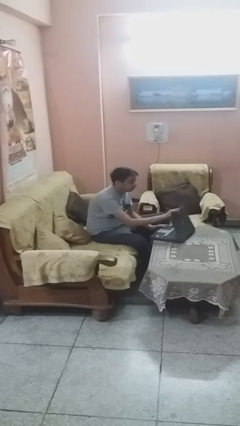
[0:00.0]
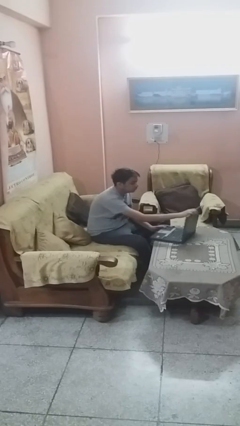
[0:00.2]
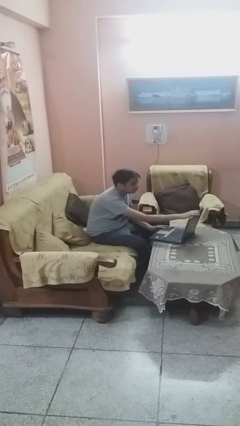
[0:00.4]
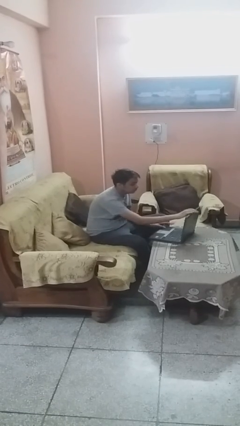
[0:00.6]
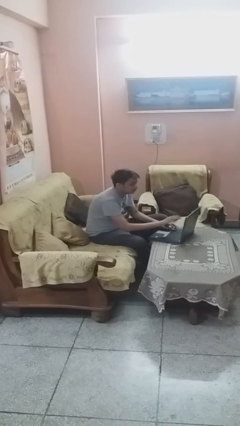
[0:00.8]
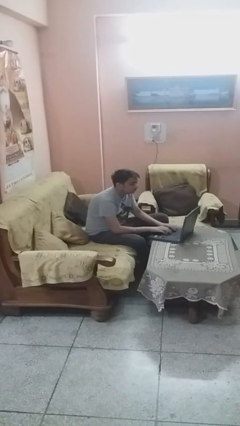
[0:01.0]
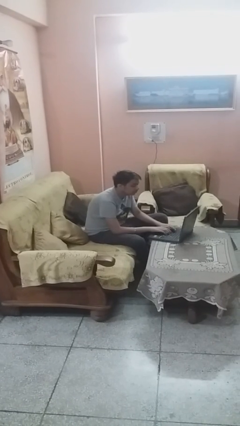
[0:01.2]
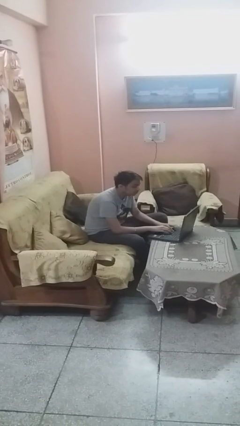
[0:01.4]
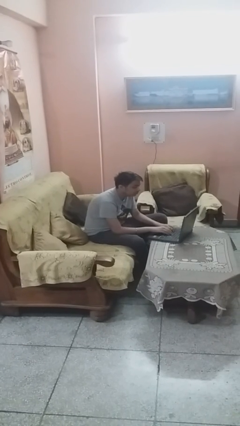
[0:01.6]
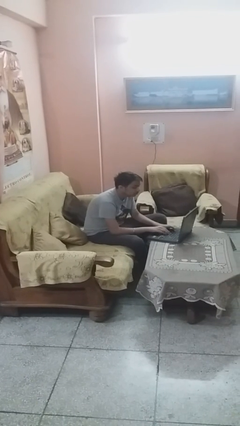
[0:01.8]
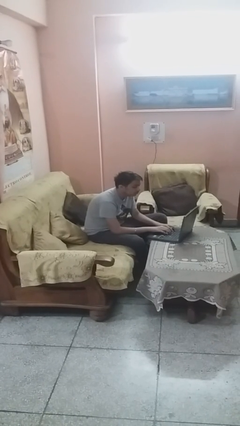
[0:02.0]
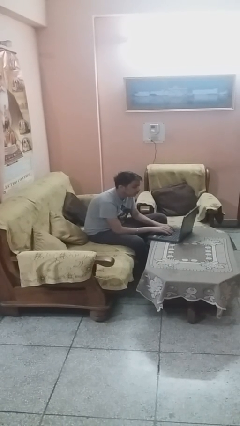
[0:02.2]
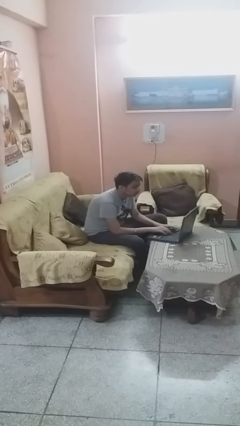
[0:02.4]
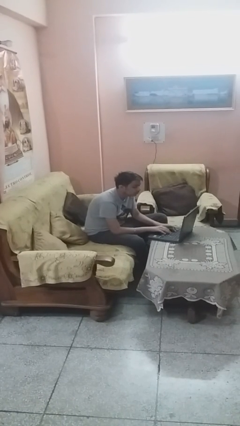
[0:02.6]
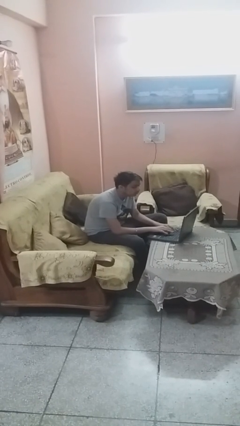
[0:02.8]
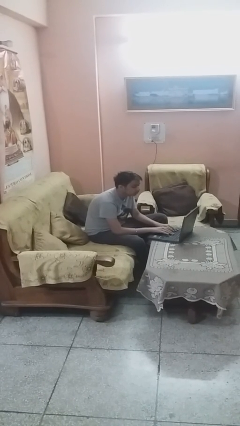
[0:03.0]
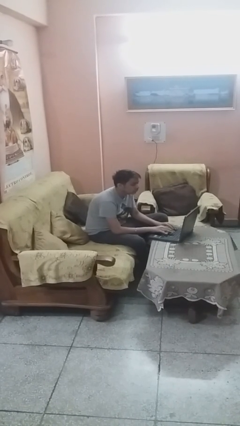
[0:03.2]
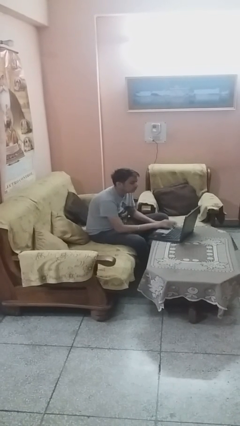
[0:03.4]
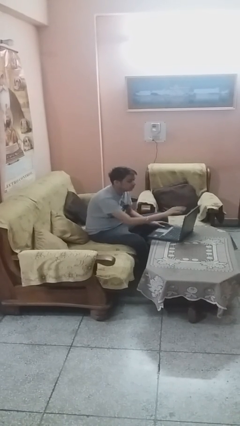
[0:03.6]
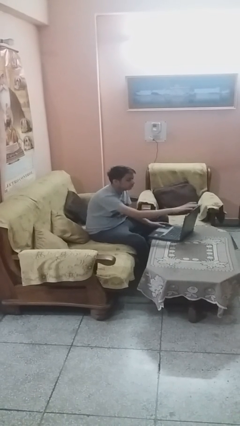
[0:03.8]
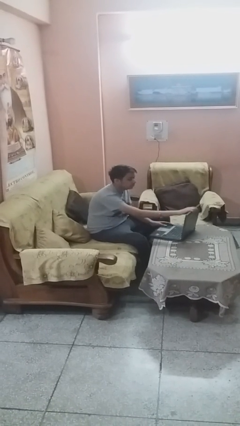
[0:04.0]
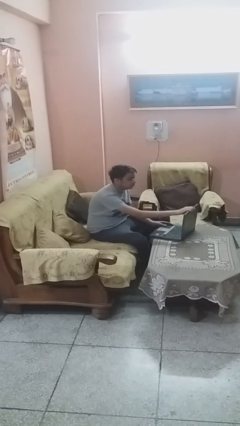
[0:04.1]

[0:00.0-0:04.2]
person interacts with laptop

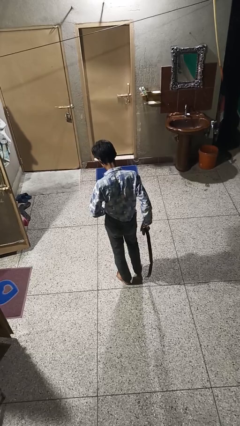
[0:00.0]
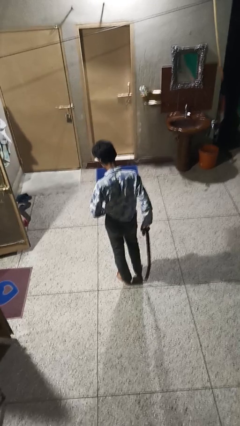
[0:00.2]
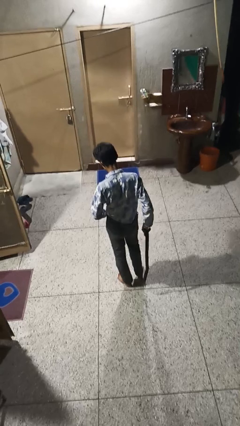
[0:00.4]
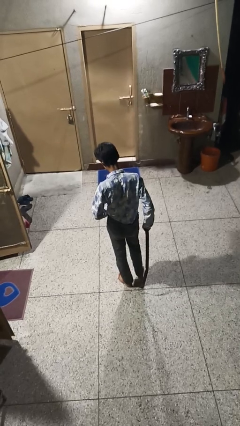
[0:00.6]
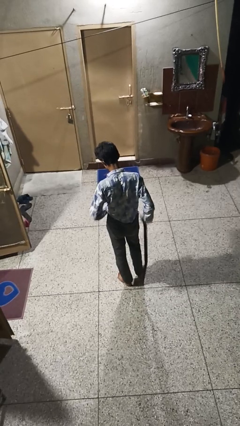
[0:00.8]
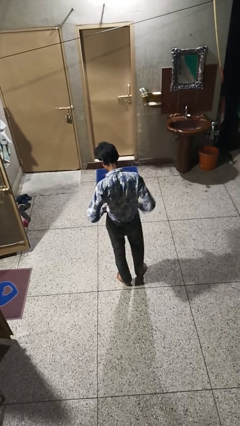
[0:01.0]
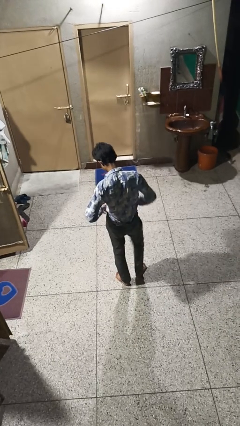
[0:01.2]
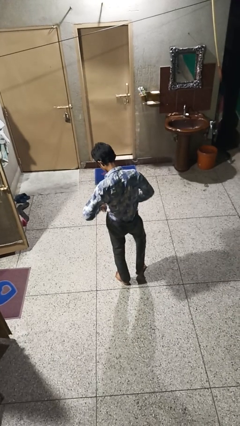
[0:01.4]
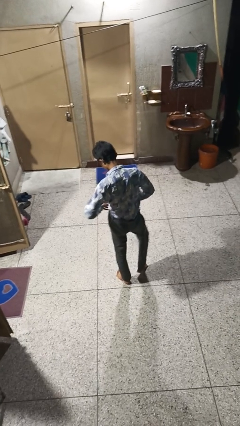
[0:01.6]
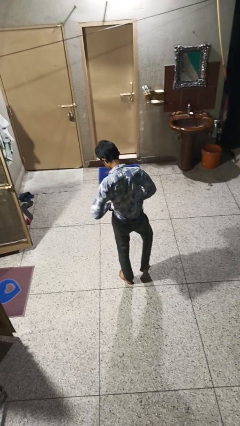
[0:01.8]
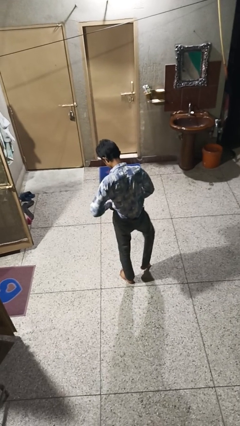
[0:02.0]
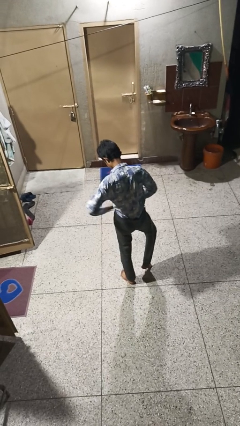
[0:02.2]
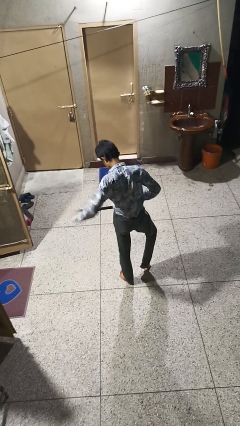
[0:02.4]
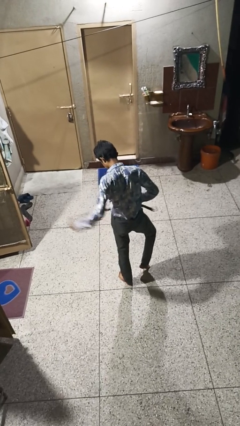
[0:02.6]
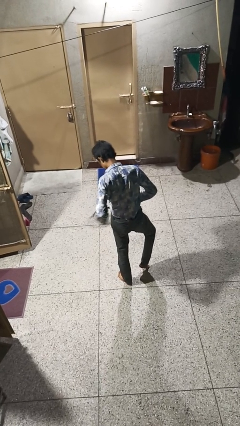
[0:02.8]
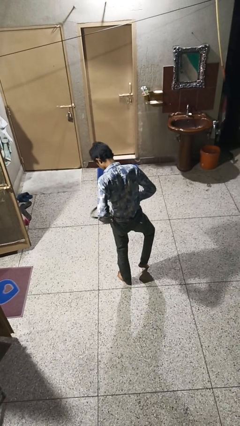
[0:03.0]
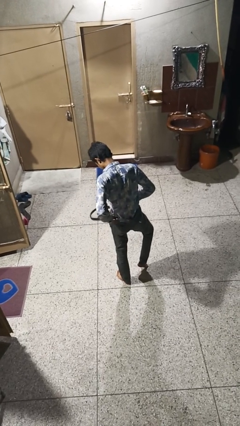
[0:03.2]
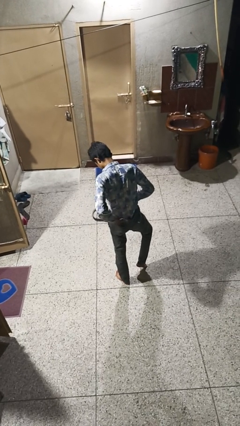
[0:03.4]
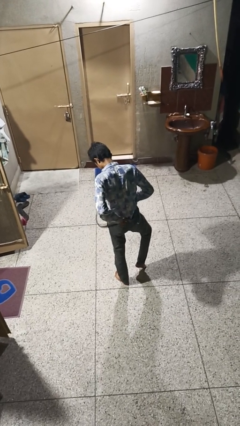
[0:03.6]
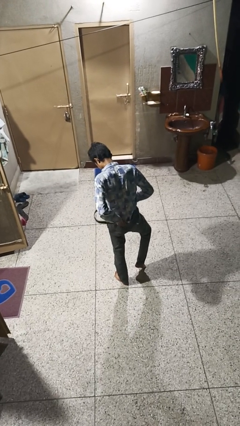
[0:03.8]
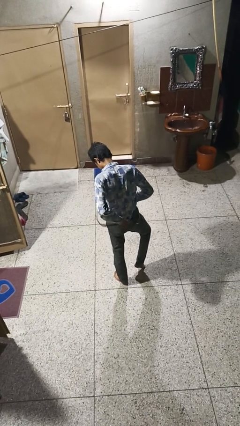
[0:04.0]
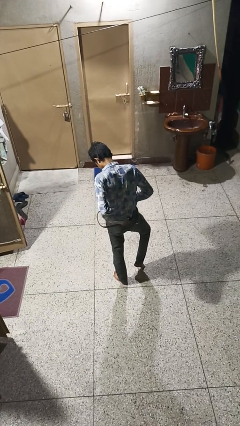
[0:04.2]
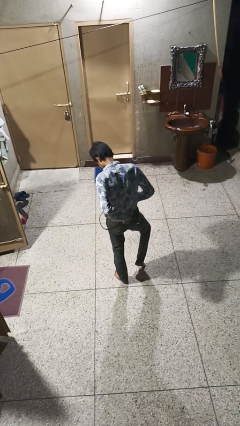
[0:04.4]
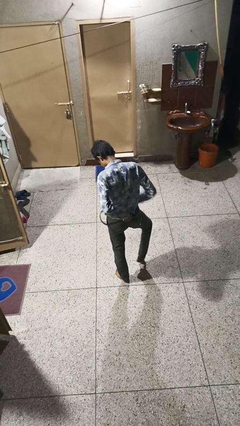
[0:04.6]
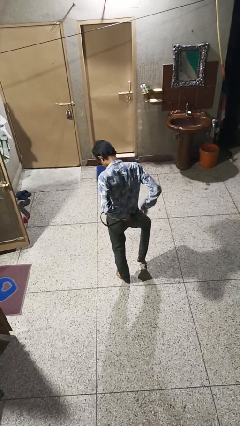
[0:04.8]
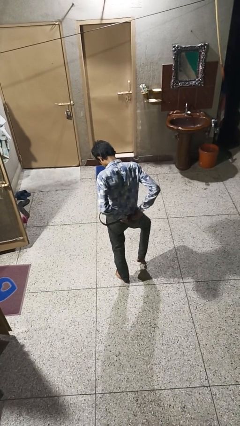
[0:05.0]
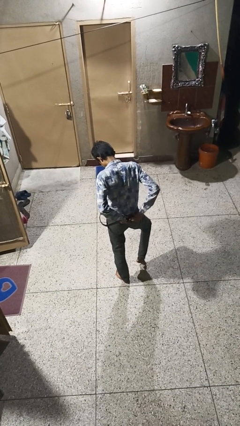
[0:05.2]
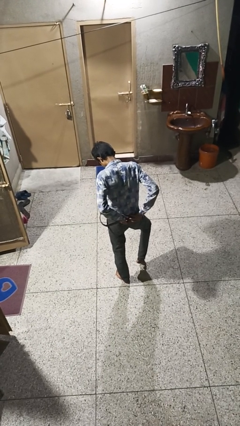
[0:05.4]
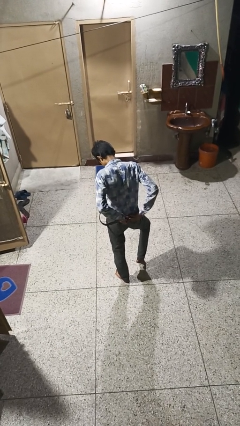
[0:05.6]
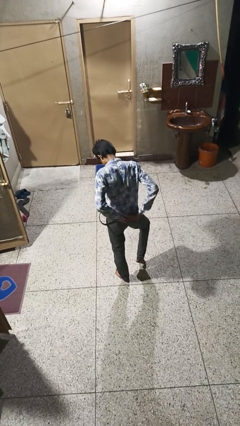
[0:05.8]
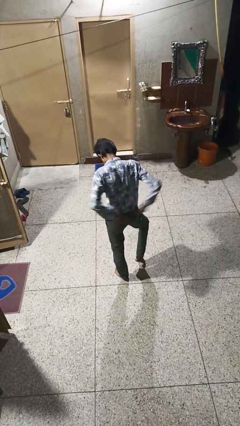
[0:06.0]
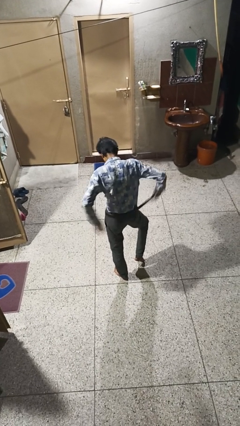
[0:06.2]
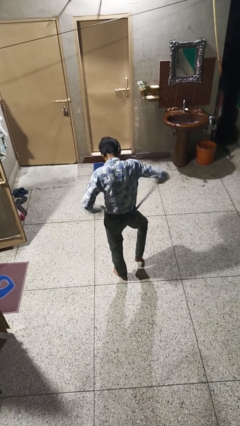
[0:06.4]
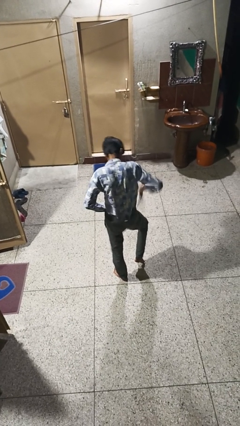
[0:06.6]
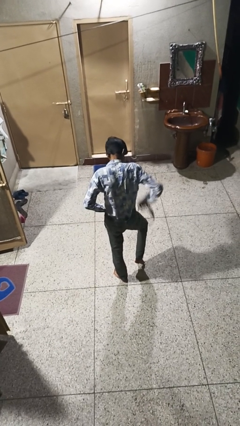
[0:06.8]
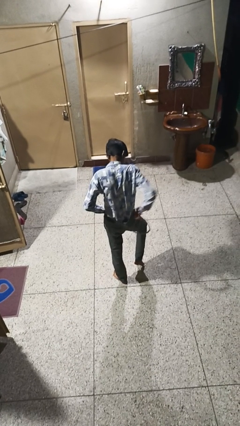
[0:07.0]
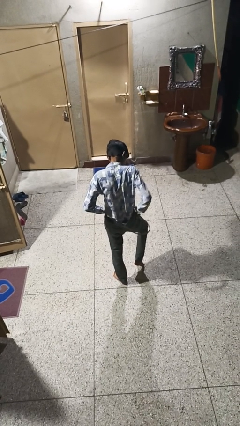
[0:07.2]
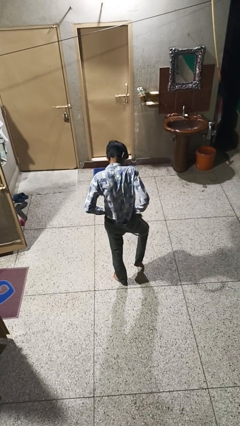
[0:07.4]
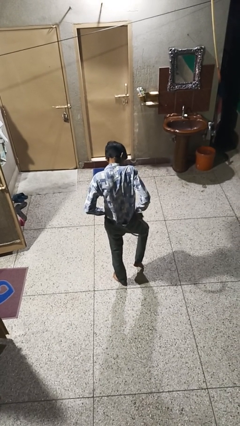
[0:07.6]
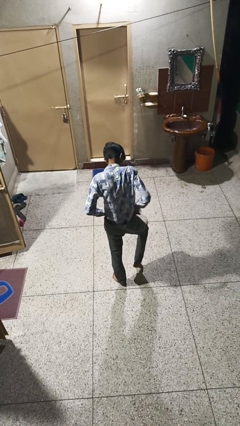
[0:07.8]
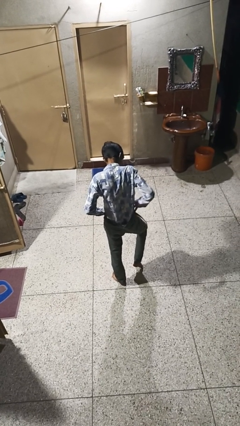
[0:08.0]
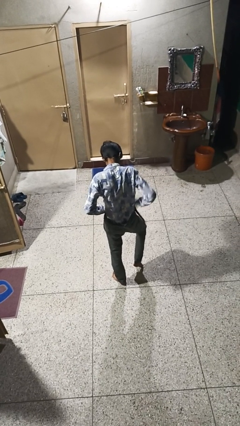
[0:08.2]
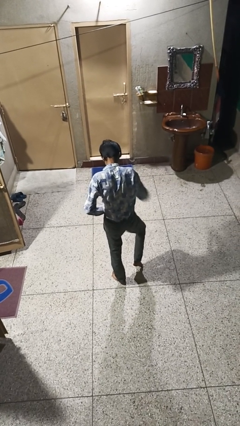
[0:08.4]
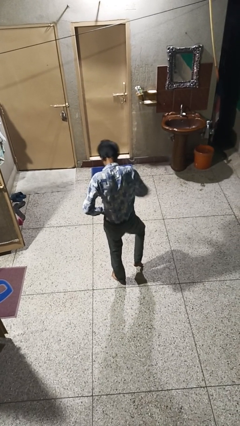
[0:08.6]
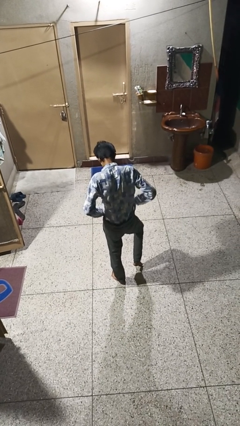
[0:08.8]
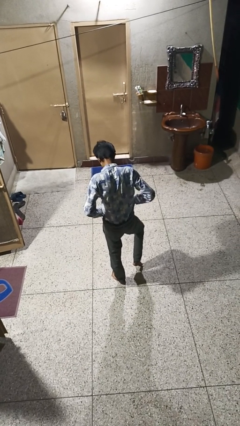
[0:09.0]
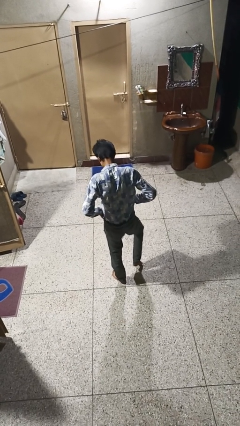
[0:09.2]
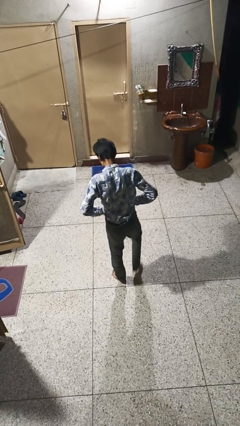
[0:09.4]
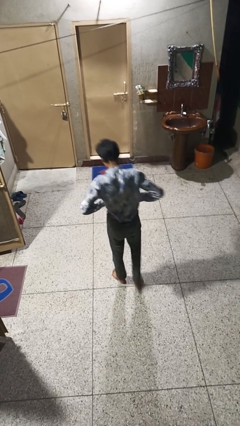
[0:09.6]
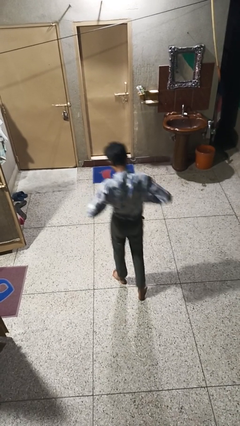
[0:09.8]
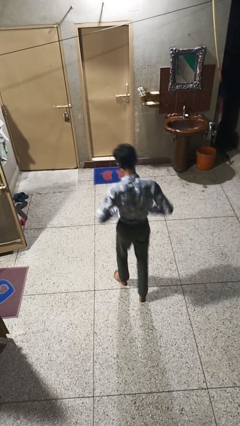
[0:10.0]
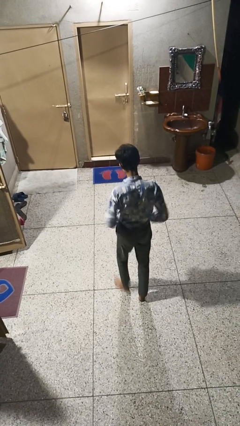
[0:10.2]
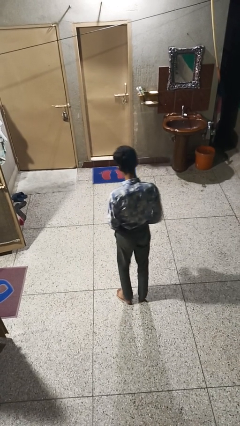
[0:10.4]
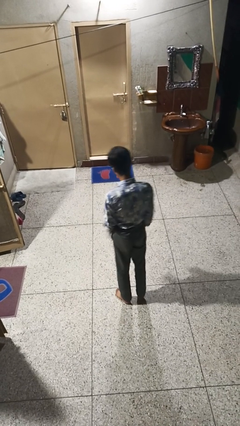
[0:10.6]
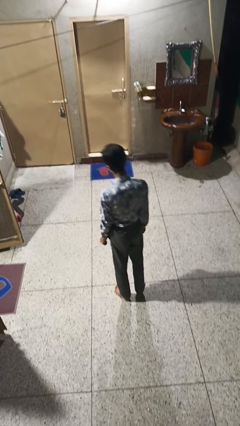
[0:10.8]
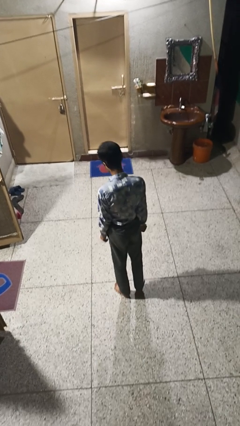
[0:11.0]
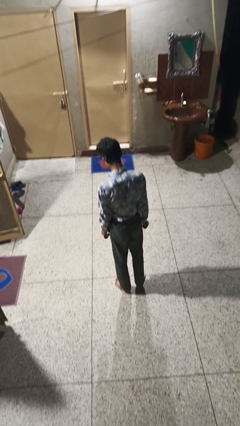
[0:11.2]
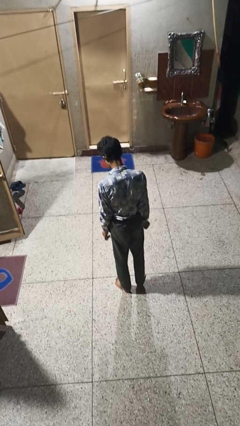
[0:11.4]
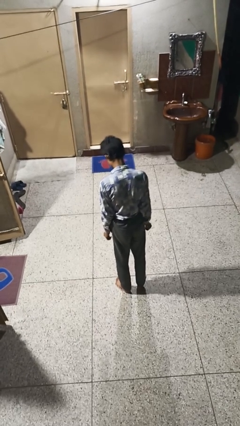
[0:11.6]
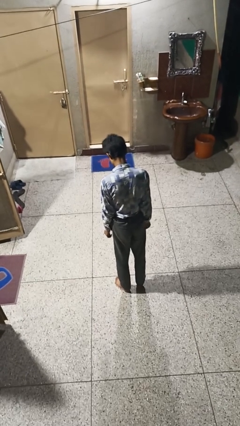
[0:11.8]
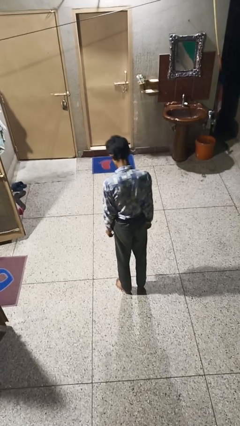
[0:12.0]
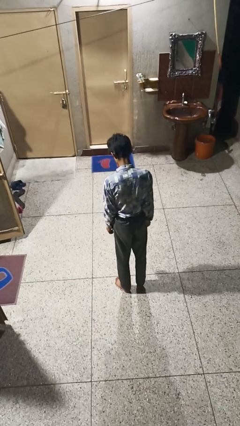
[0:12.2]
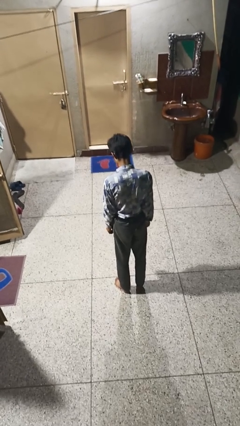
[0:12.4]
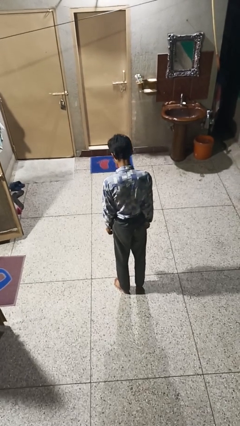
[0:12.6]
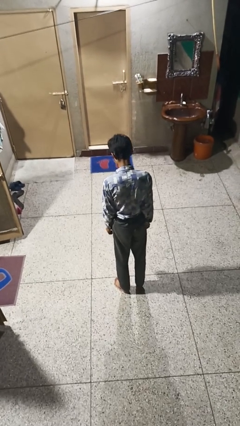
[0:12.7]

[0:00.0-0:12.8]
person puts on belt

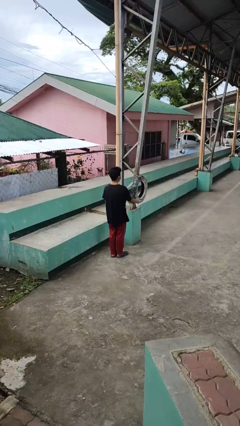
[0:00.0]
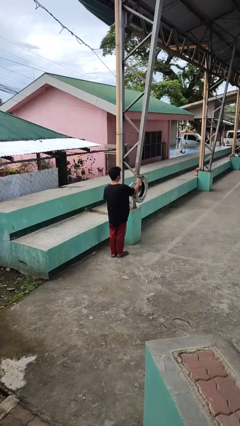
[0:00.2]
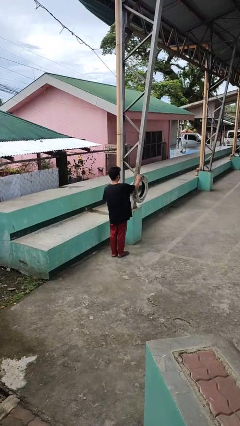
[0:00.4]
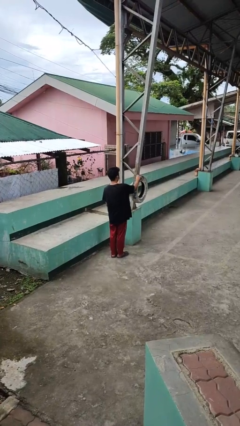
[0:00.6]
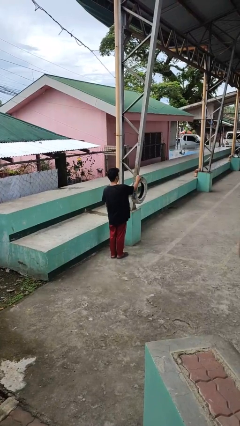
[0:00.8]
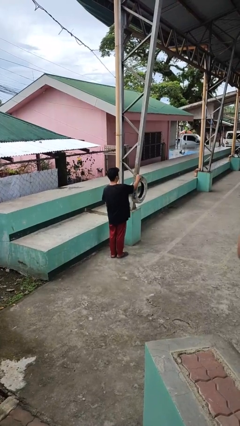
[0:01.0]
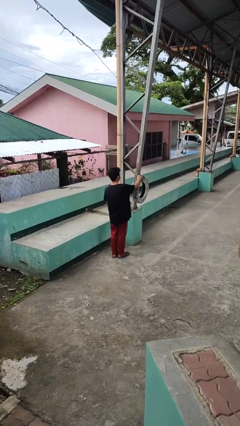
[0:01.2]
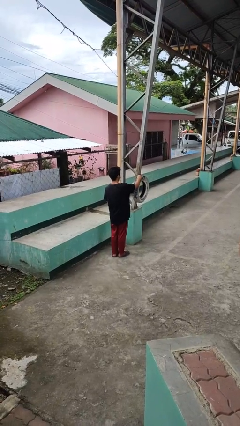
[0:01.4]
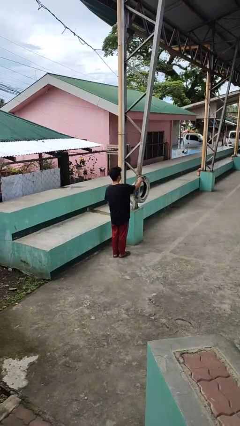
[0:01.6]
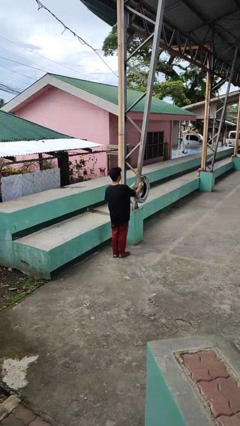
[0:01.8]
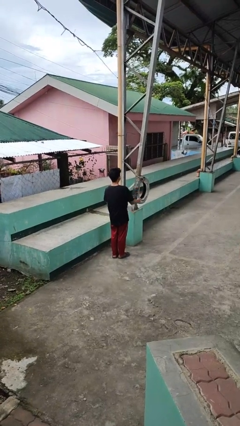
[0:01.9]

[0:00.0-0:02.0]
person taps object with finger
